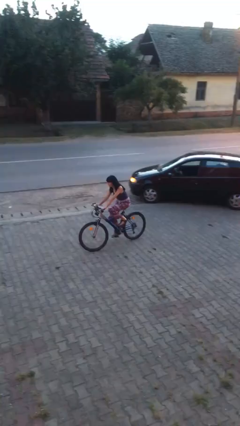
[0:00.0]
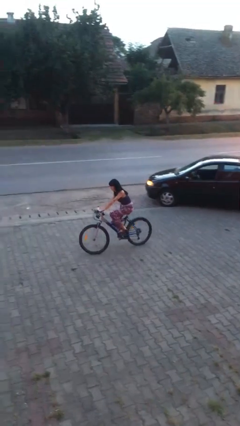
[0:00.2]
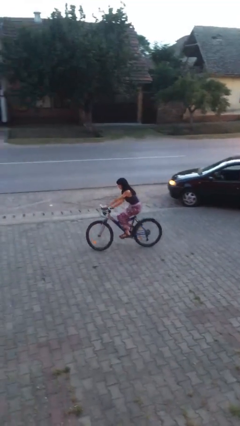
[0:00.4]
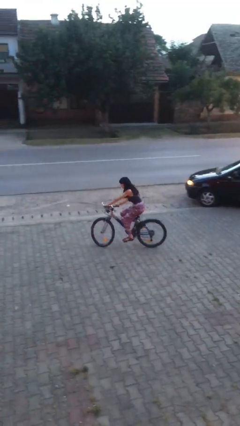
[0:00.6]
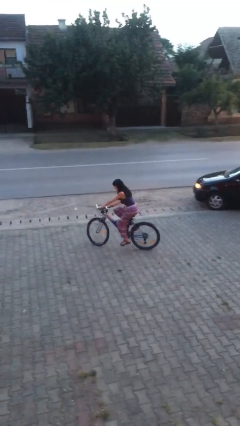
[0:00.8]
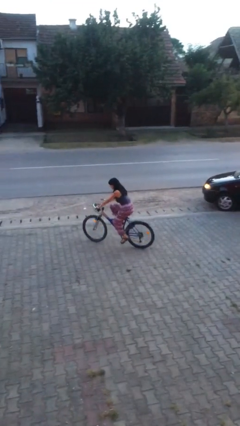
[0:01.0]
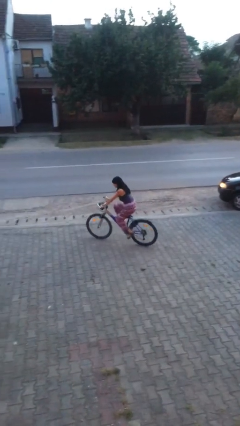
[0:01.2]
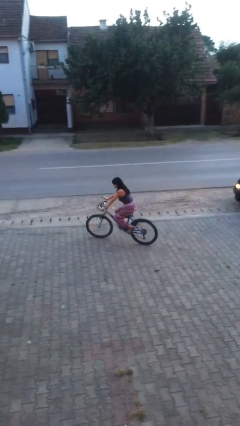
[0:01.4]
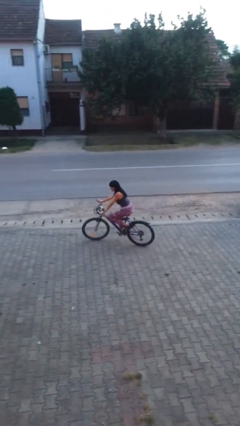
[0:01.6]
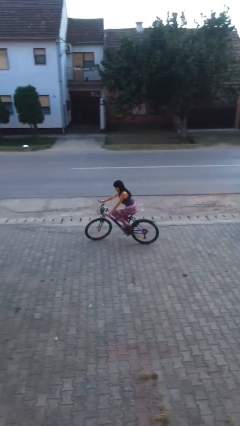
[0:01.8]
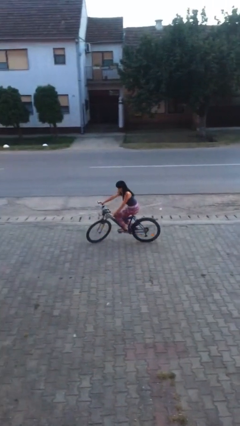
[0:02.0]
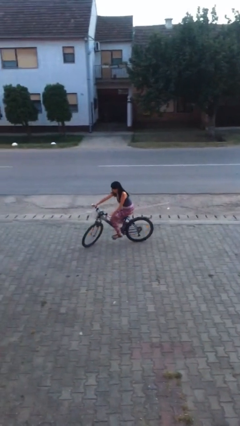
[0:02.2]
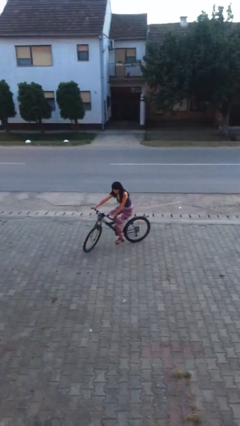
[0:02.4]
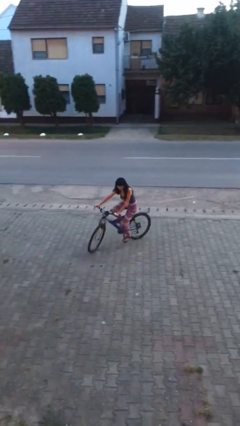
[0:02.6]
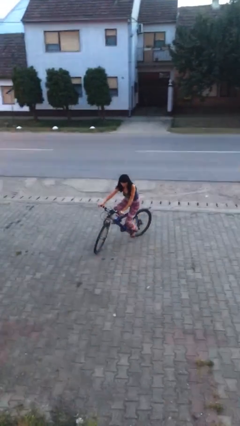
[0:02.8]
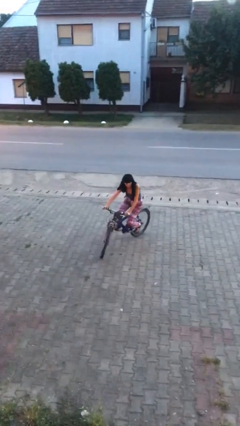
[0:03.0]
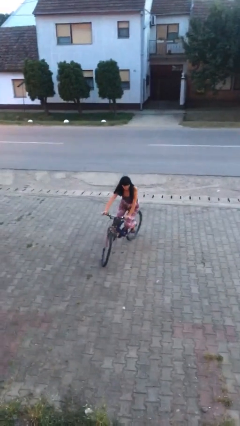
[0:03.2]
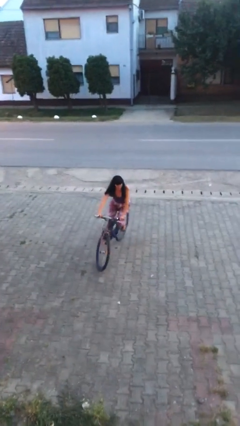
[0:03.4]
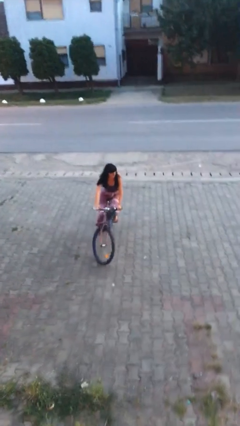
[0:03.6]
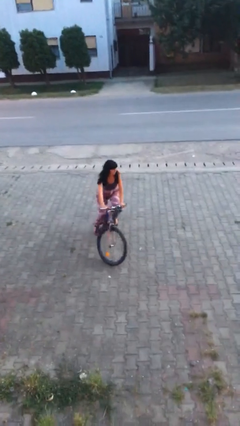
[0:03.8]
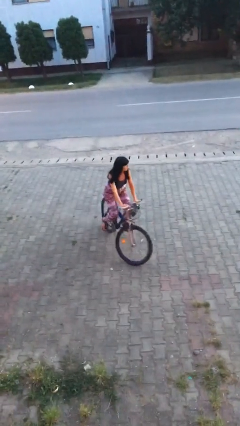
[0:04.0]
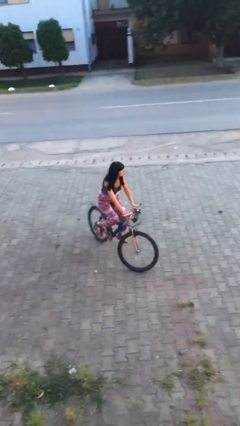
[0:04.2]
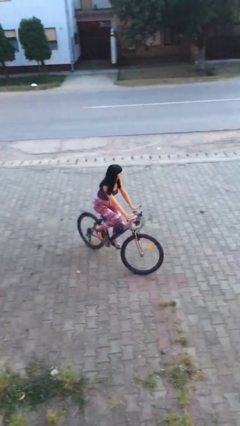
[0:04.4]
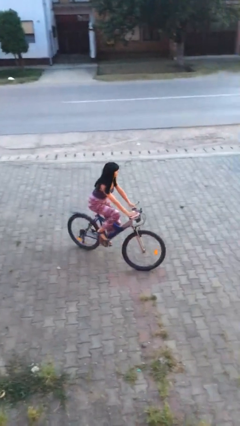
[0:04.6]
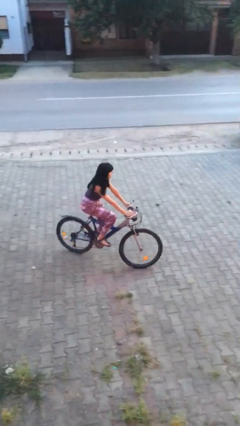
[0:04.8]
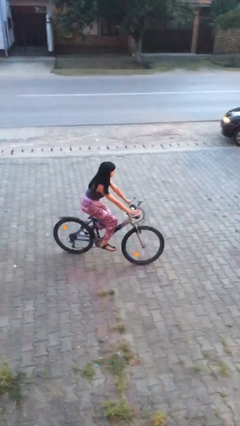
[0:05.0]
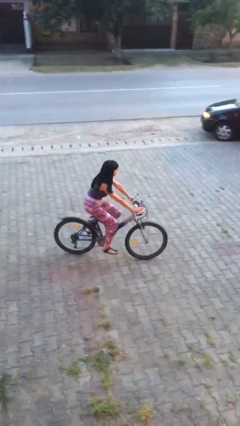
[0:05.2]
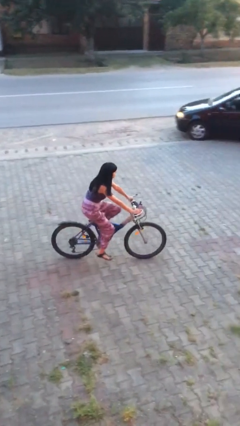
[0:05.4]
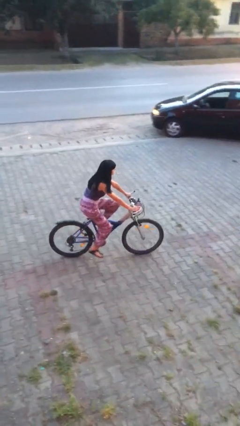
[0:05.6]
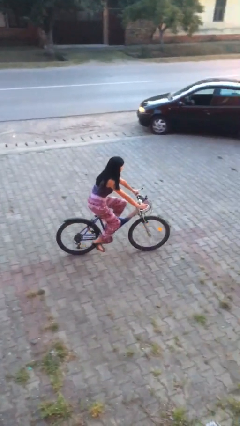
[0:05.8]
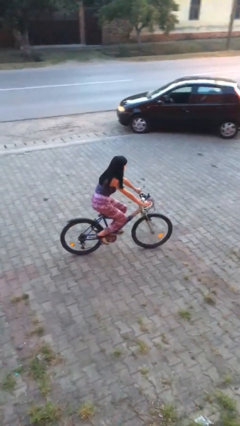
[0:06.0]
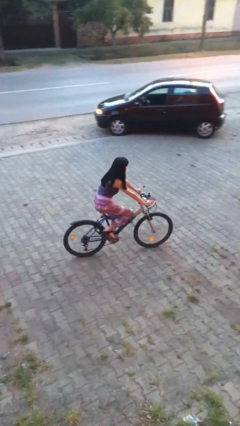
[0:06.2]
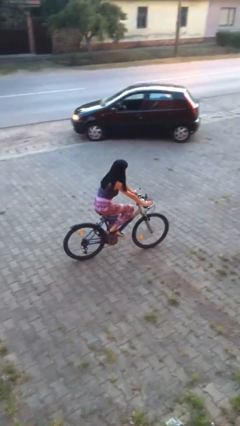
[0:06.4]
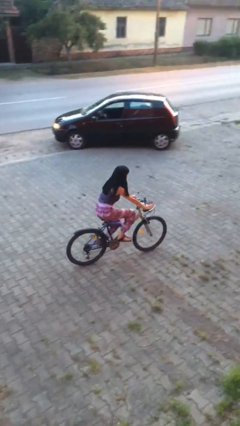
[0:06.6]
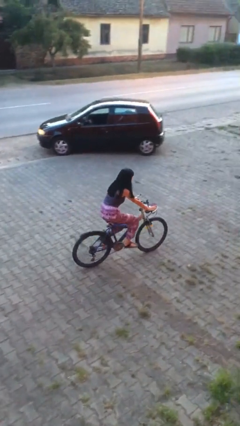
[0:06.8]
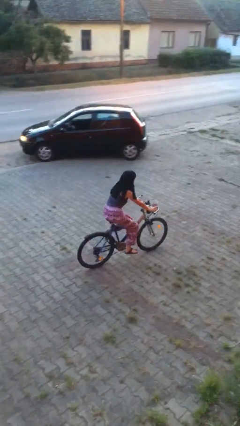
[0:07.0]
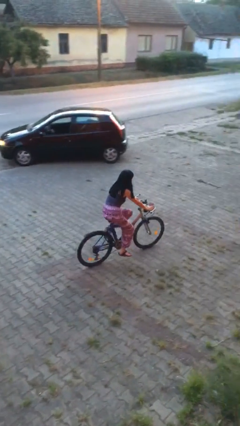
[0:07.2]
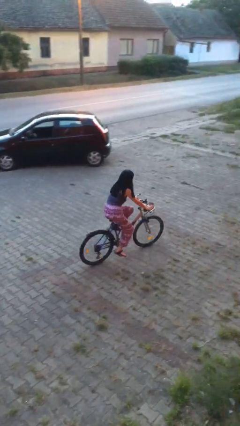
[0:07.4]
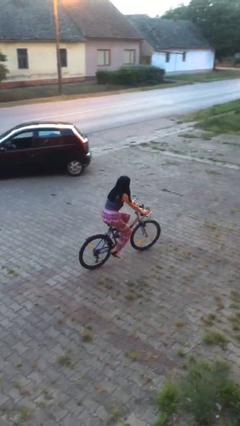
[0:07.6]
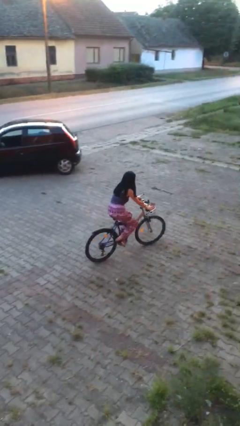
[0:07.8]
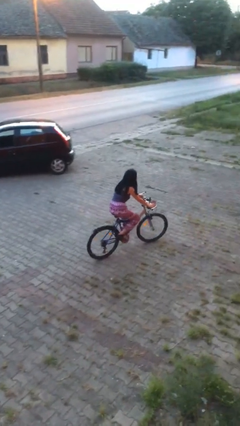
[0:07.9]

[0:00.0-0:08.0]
person rides bicycle

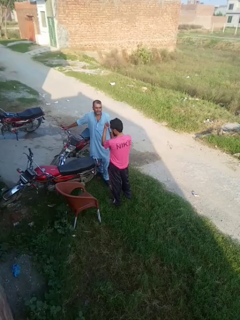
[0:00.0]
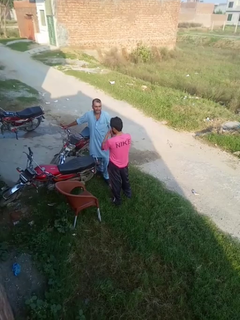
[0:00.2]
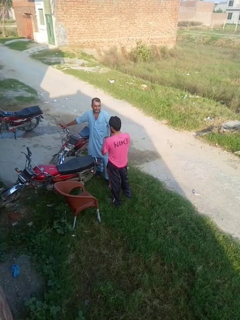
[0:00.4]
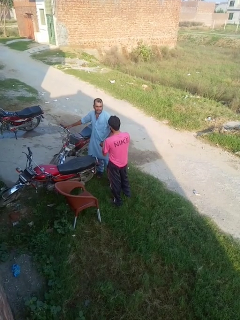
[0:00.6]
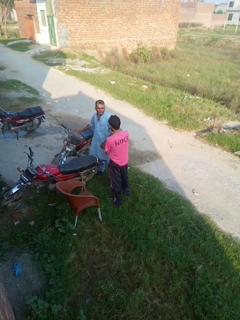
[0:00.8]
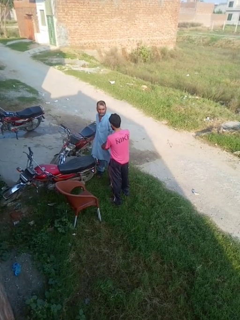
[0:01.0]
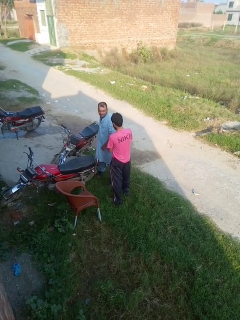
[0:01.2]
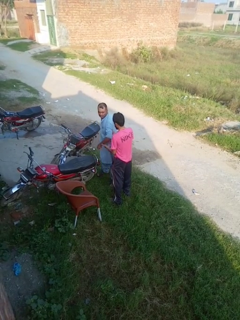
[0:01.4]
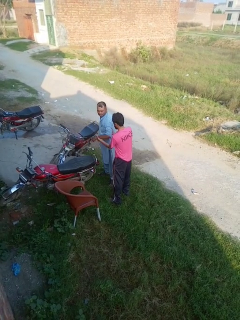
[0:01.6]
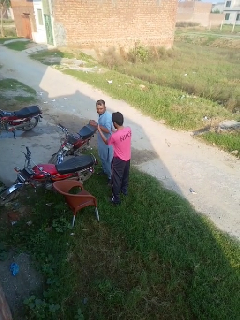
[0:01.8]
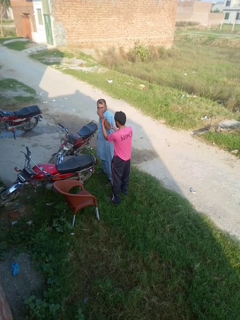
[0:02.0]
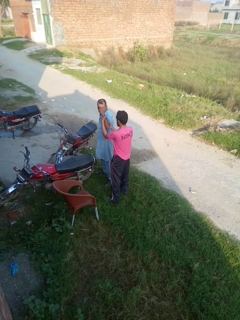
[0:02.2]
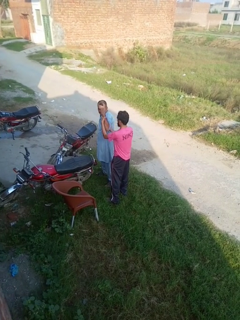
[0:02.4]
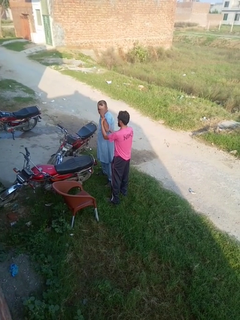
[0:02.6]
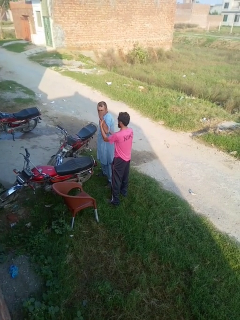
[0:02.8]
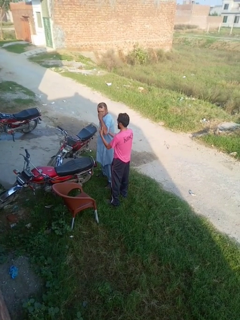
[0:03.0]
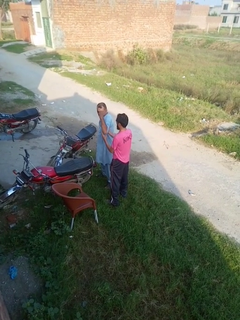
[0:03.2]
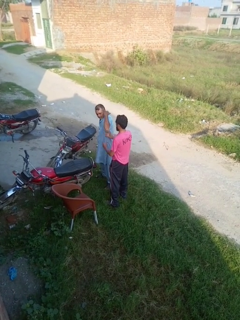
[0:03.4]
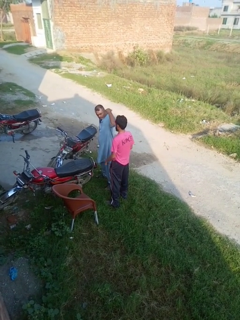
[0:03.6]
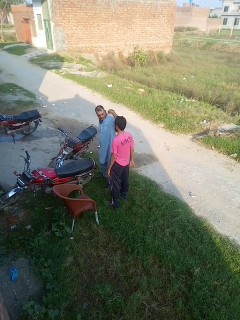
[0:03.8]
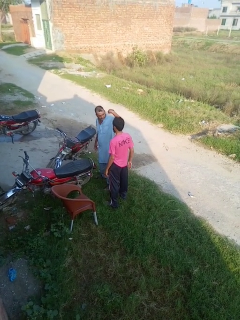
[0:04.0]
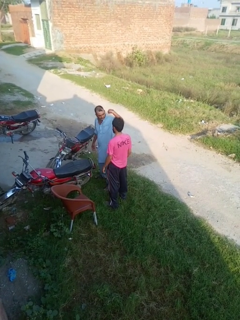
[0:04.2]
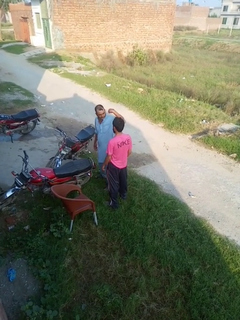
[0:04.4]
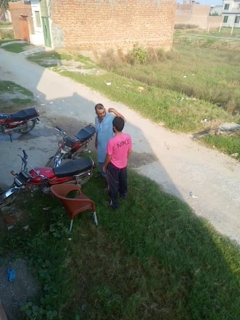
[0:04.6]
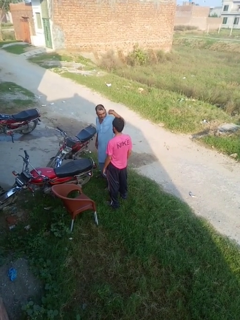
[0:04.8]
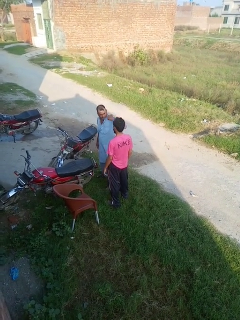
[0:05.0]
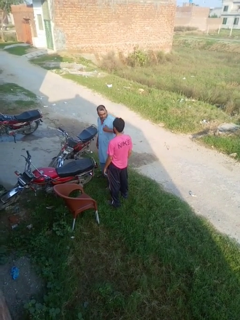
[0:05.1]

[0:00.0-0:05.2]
person grabs person by bicep

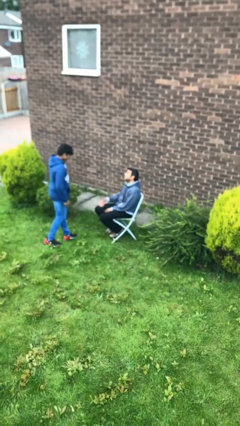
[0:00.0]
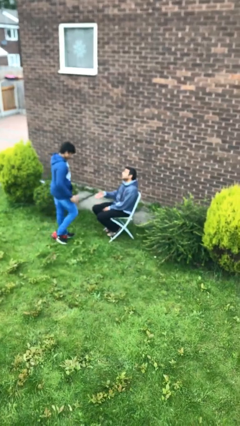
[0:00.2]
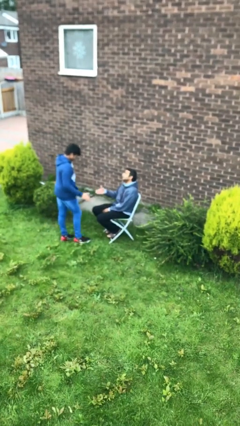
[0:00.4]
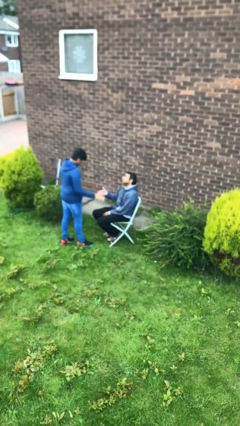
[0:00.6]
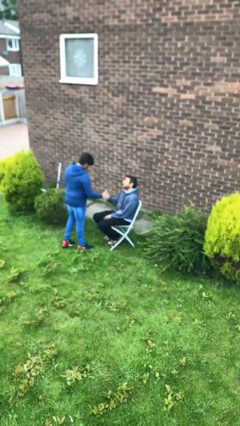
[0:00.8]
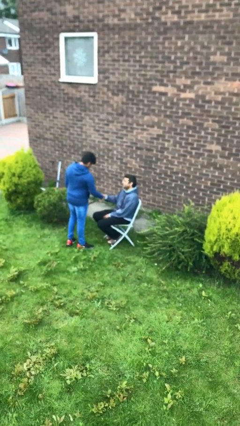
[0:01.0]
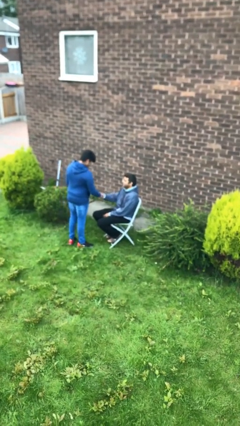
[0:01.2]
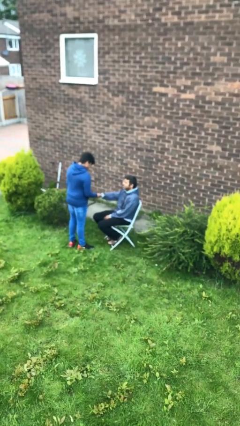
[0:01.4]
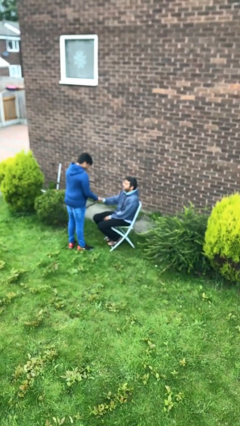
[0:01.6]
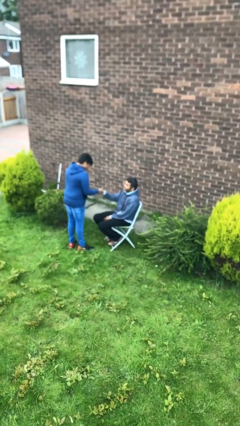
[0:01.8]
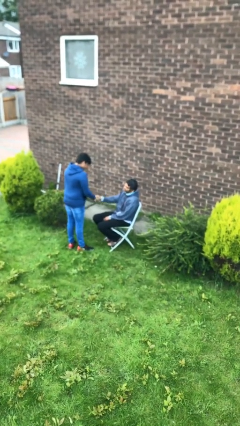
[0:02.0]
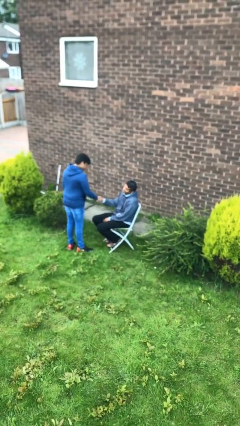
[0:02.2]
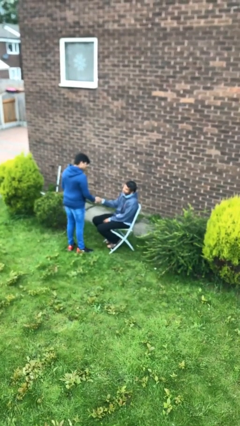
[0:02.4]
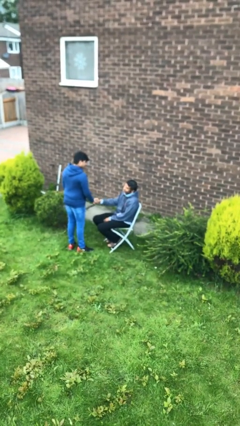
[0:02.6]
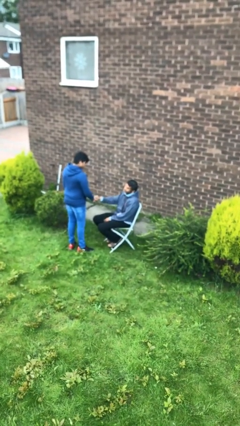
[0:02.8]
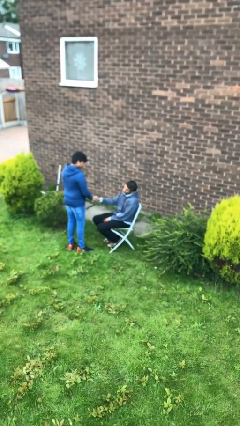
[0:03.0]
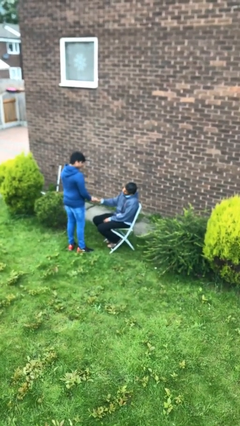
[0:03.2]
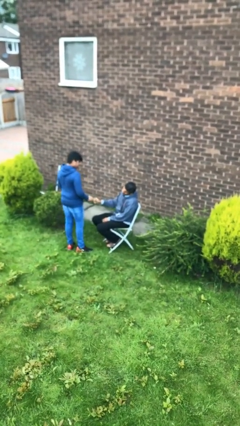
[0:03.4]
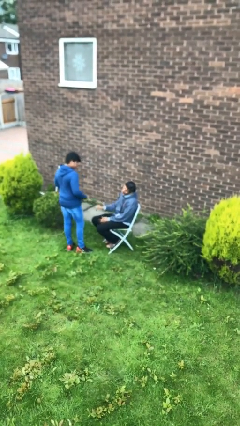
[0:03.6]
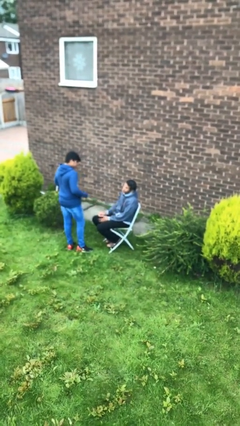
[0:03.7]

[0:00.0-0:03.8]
person shakes hand

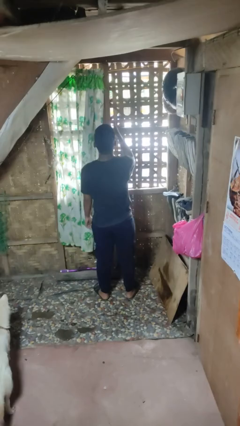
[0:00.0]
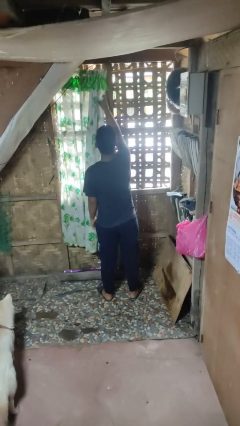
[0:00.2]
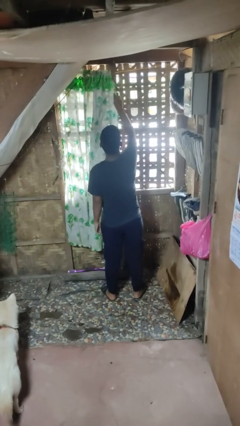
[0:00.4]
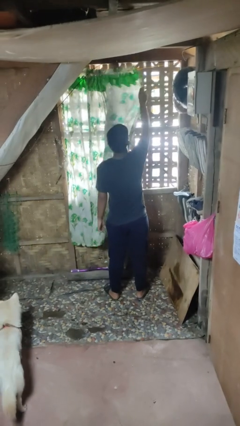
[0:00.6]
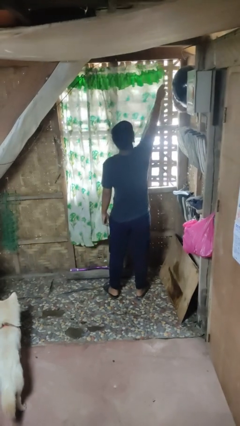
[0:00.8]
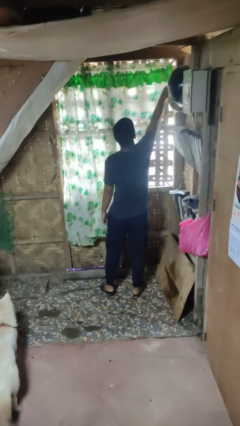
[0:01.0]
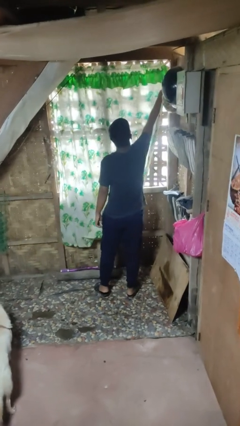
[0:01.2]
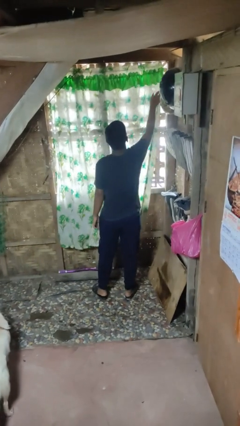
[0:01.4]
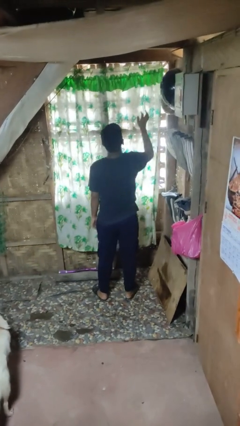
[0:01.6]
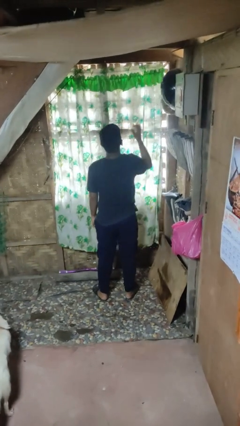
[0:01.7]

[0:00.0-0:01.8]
person closes curtains

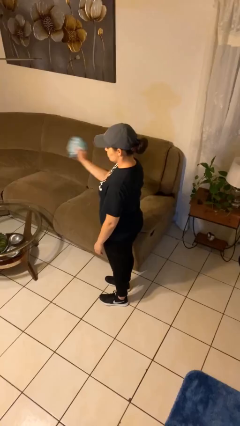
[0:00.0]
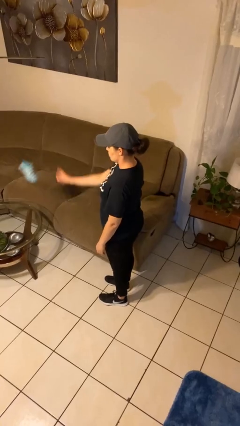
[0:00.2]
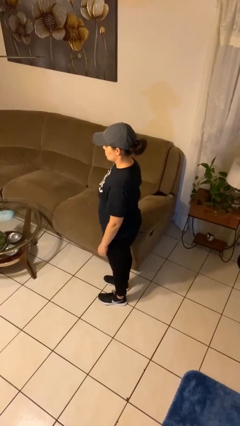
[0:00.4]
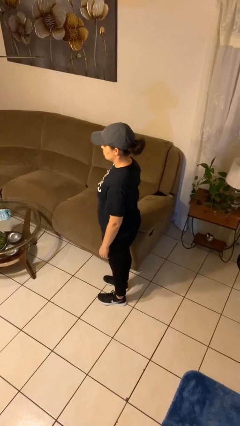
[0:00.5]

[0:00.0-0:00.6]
person throws object on table
